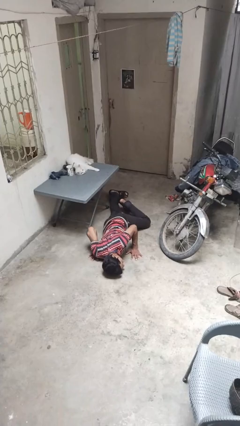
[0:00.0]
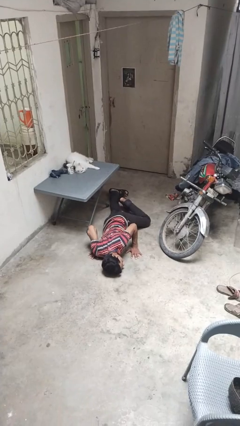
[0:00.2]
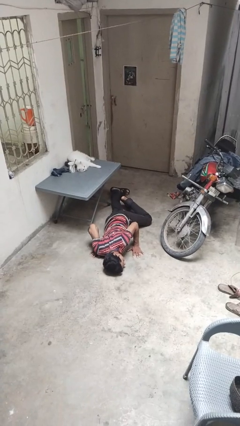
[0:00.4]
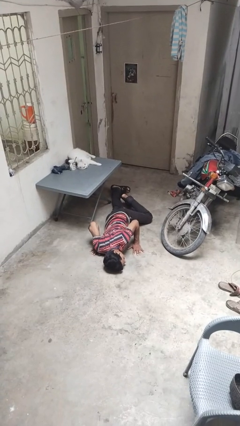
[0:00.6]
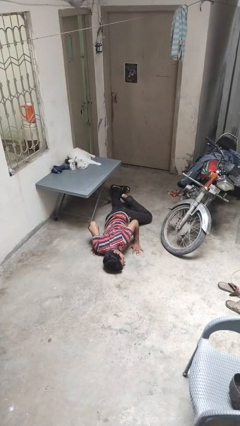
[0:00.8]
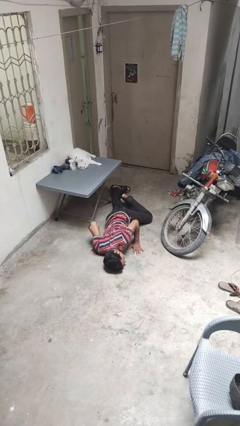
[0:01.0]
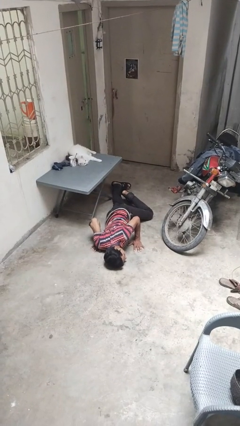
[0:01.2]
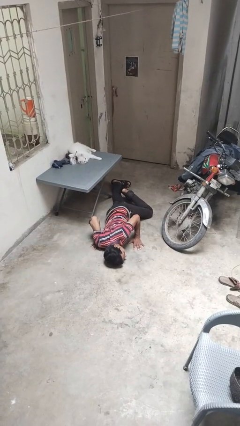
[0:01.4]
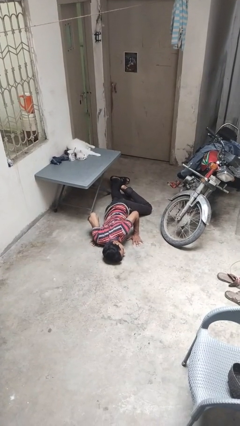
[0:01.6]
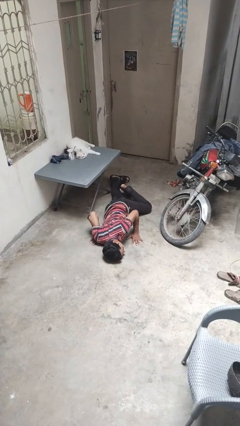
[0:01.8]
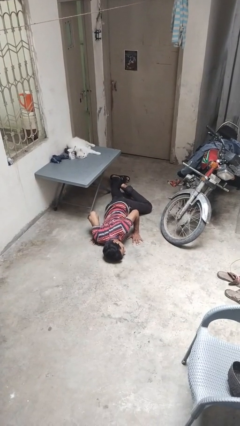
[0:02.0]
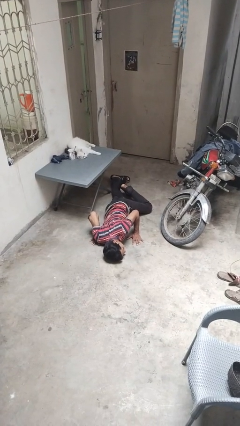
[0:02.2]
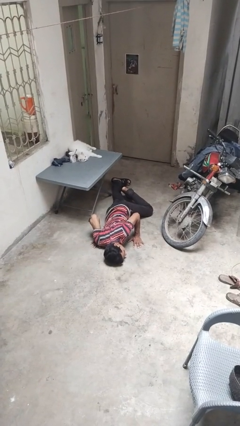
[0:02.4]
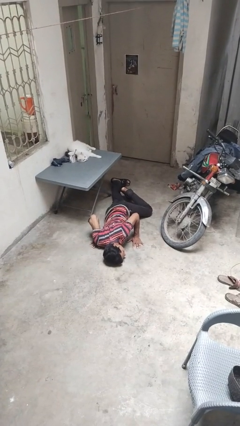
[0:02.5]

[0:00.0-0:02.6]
person lies down on floor

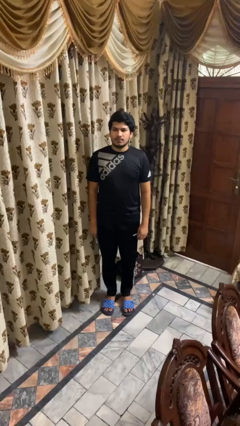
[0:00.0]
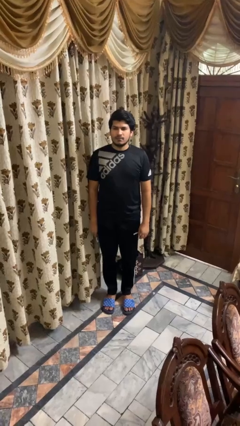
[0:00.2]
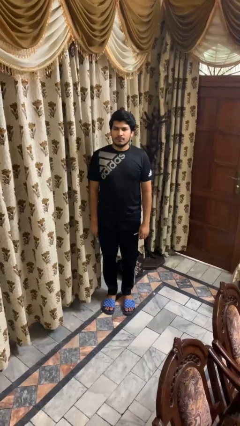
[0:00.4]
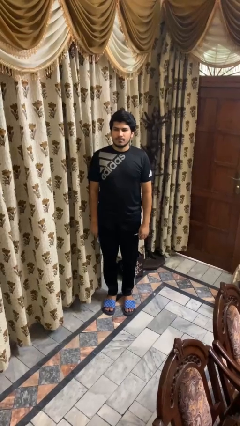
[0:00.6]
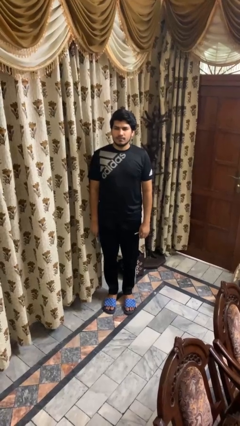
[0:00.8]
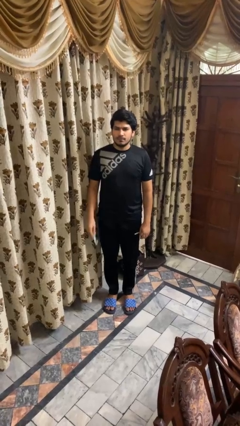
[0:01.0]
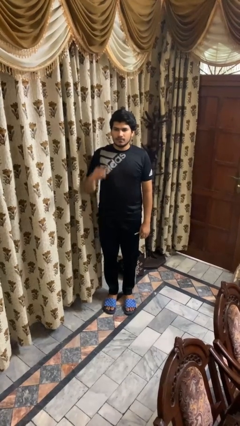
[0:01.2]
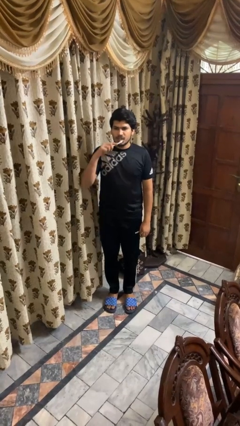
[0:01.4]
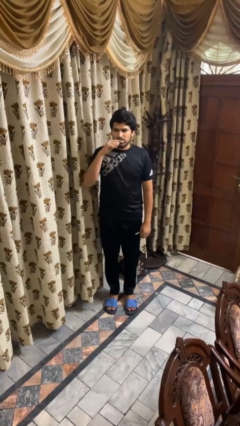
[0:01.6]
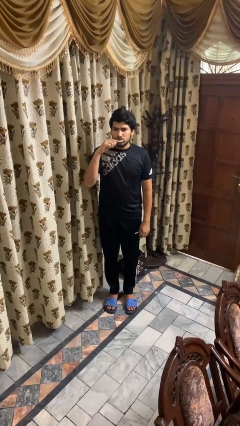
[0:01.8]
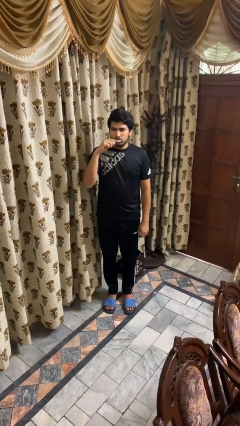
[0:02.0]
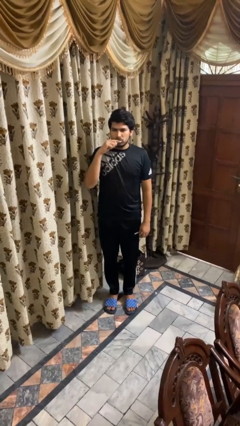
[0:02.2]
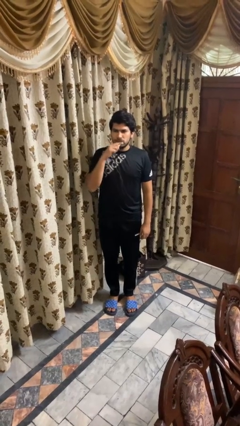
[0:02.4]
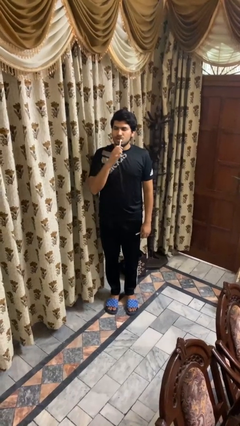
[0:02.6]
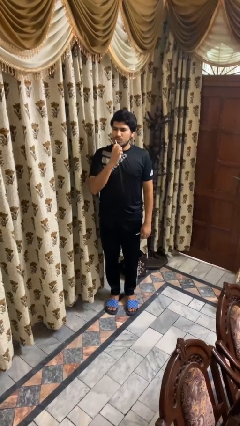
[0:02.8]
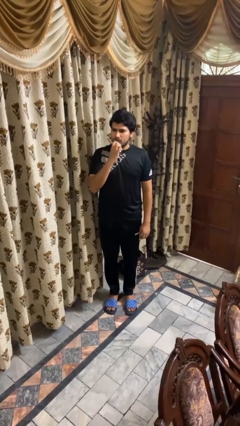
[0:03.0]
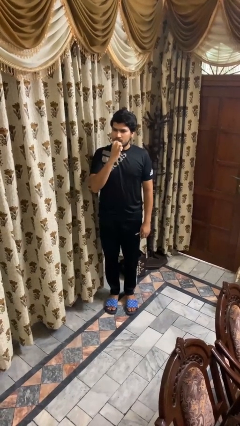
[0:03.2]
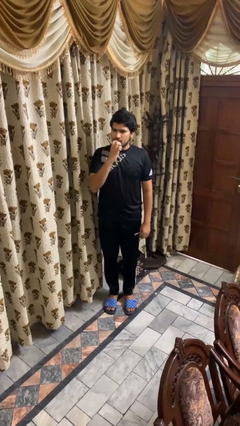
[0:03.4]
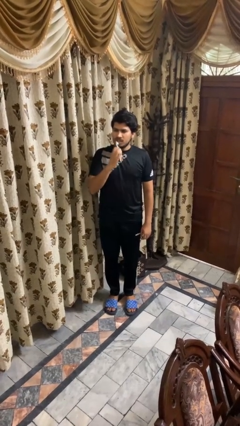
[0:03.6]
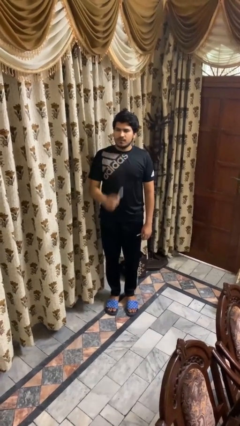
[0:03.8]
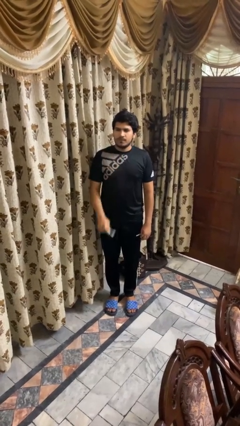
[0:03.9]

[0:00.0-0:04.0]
person brushes teeth

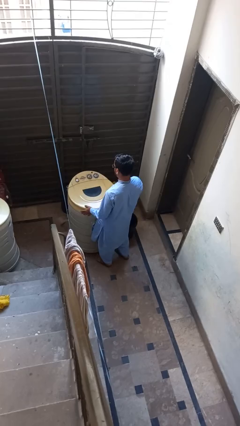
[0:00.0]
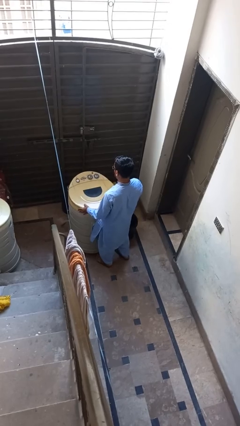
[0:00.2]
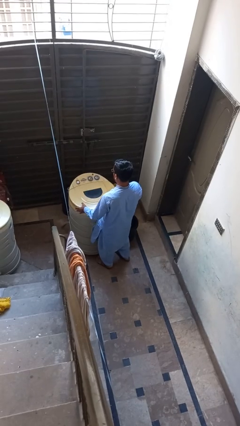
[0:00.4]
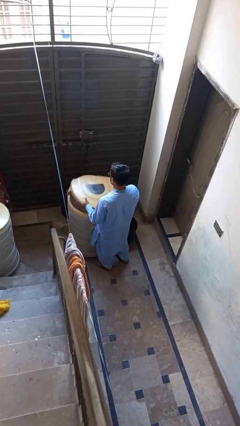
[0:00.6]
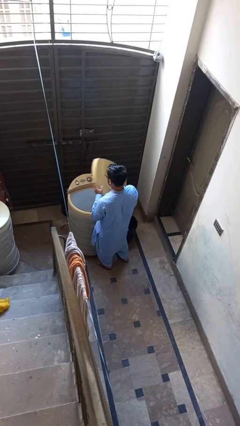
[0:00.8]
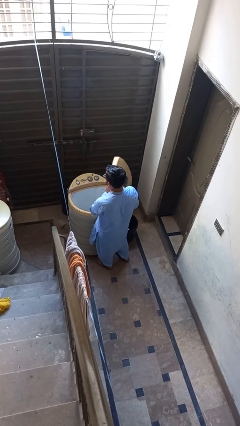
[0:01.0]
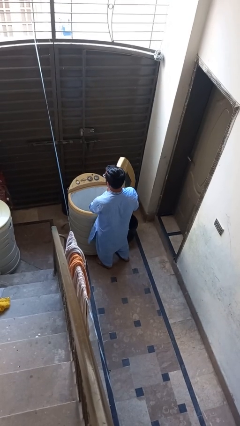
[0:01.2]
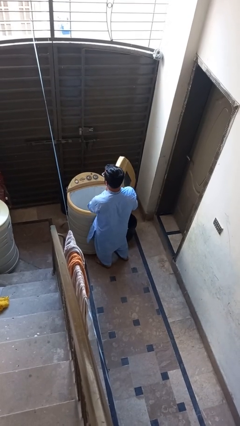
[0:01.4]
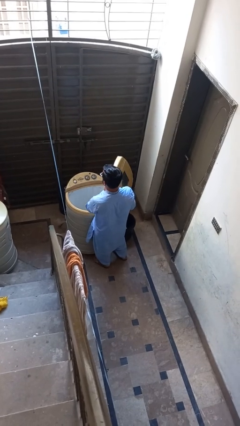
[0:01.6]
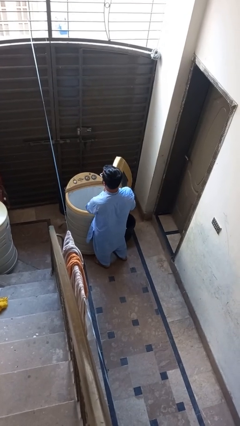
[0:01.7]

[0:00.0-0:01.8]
person opens clothes washer

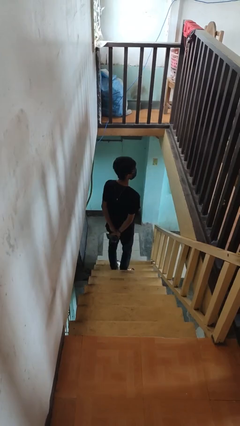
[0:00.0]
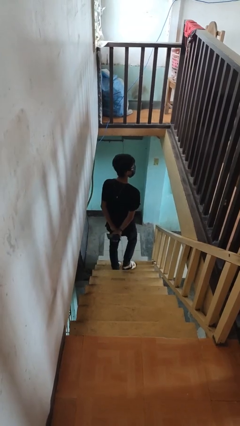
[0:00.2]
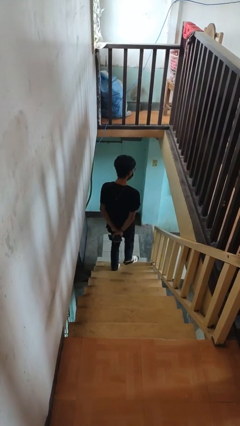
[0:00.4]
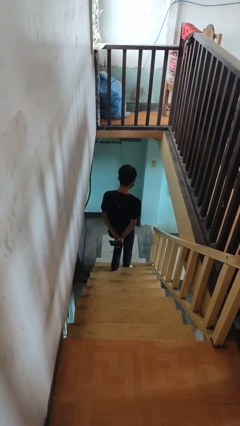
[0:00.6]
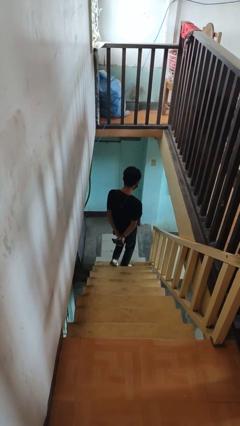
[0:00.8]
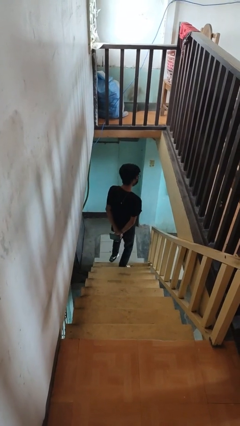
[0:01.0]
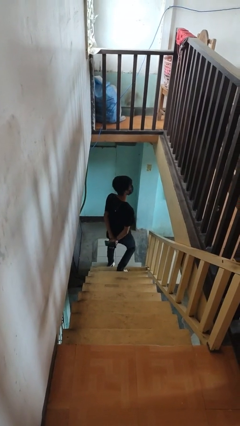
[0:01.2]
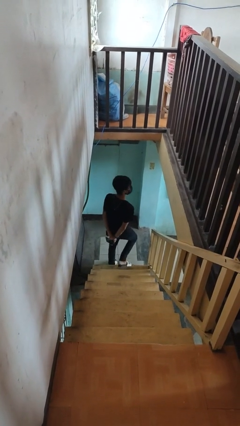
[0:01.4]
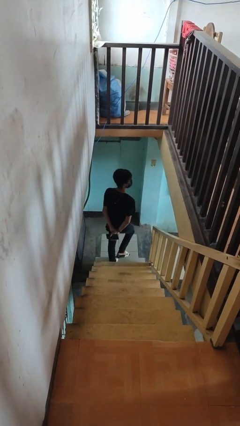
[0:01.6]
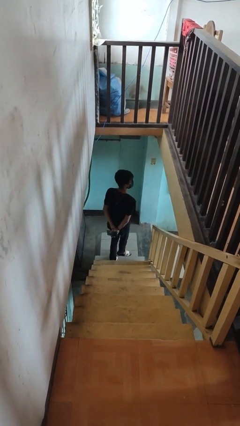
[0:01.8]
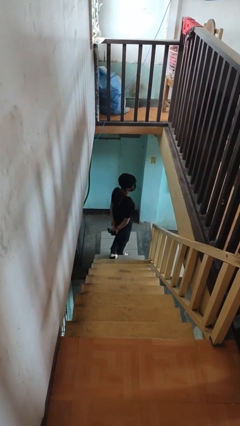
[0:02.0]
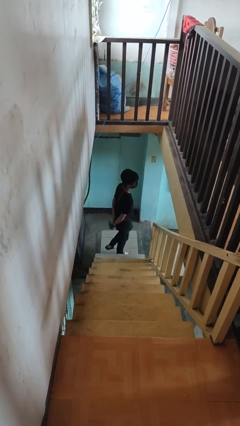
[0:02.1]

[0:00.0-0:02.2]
person climbs down ladder

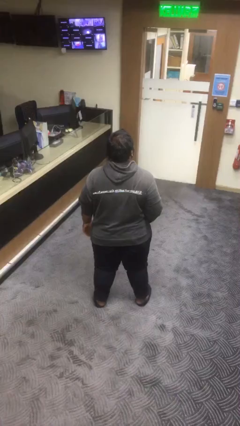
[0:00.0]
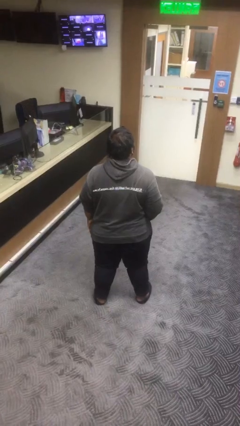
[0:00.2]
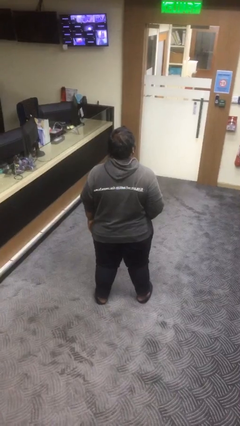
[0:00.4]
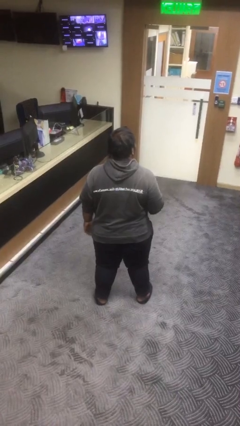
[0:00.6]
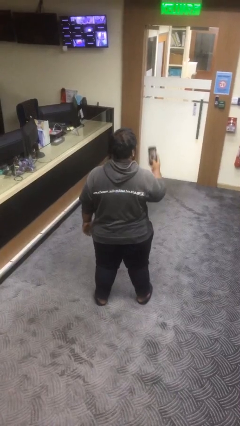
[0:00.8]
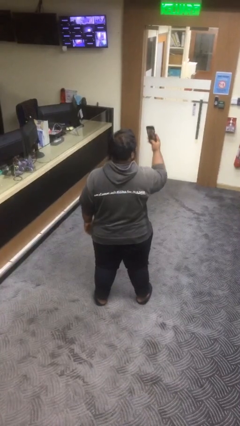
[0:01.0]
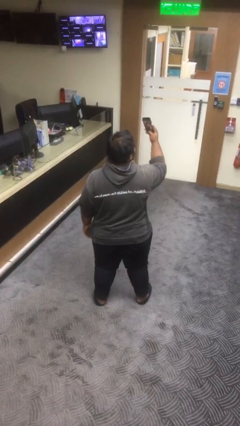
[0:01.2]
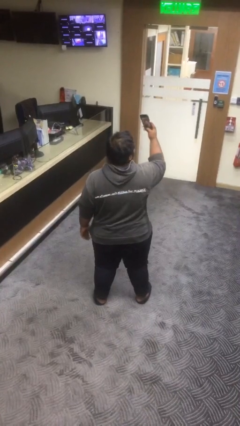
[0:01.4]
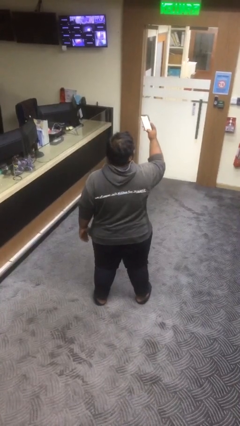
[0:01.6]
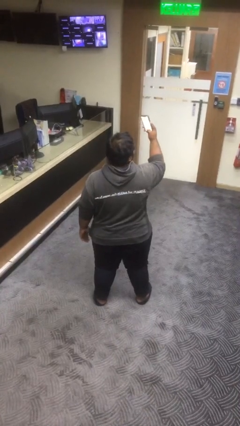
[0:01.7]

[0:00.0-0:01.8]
person takes selfie

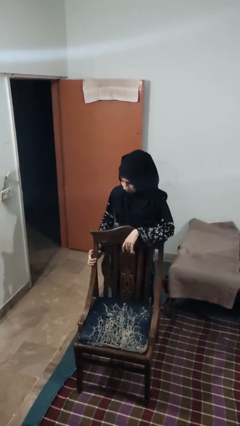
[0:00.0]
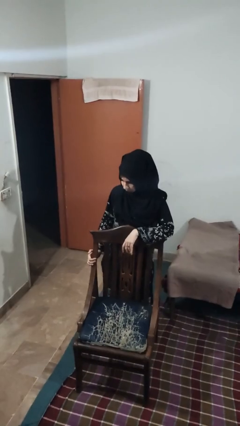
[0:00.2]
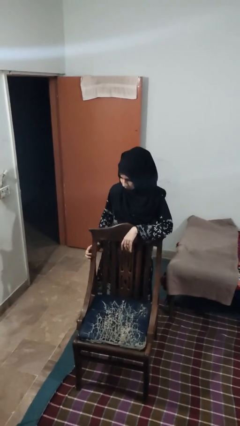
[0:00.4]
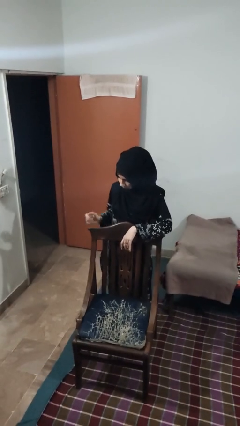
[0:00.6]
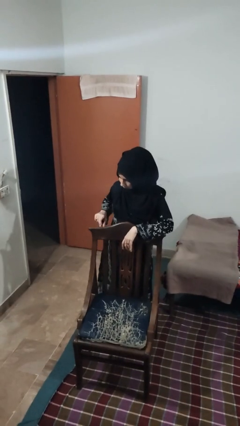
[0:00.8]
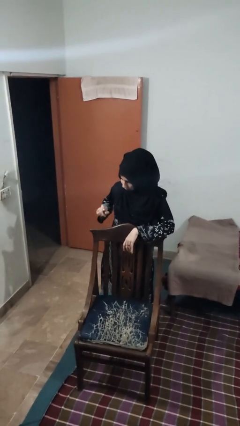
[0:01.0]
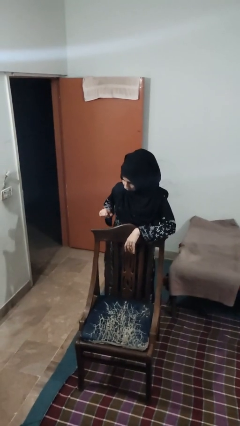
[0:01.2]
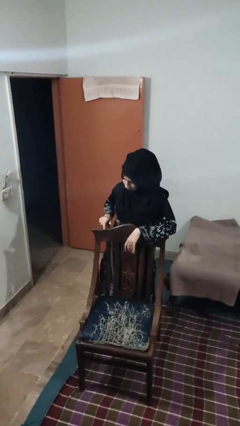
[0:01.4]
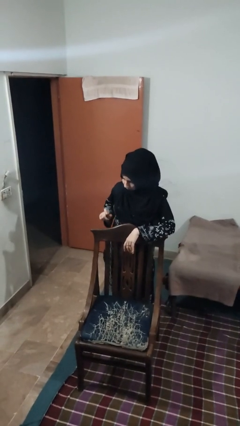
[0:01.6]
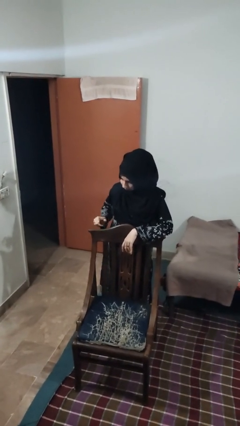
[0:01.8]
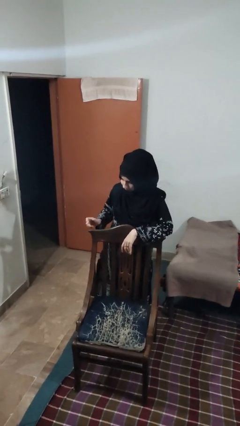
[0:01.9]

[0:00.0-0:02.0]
person taps object with finger

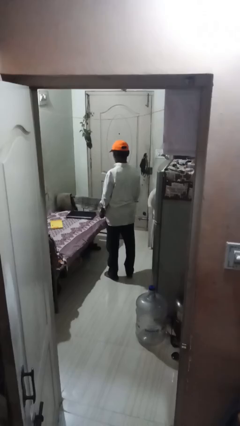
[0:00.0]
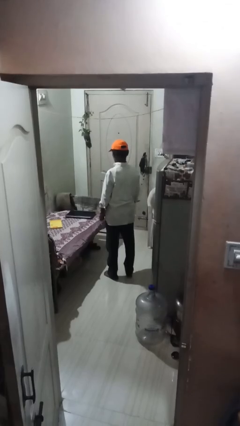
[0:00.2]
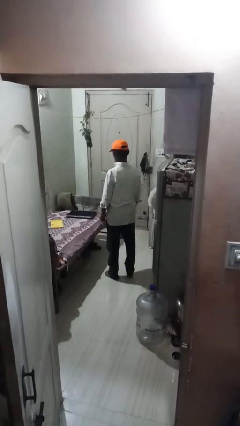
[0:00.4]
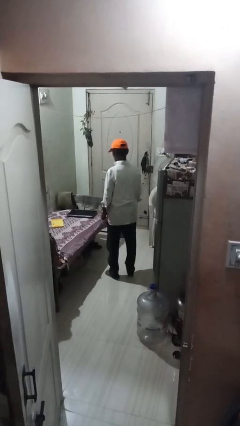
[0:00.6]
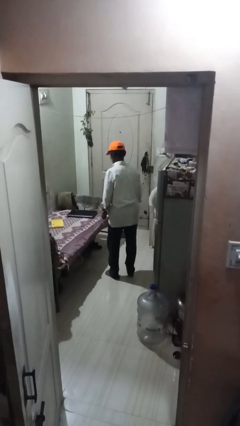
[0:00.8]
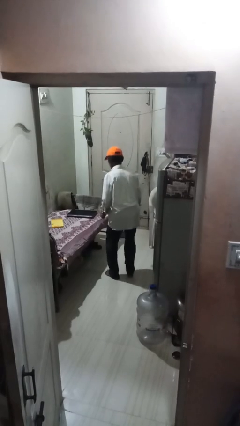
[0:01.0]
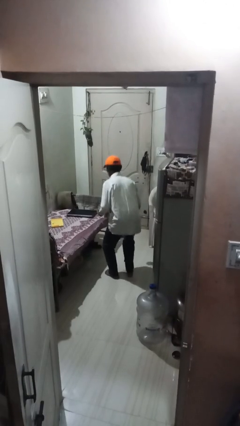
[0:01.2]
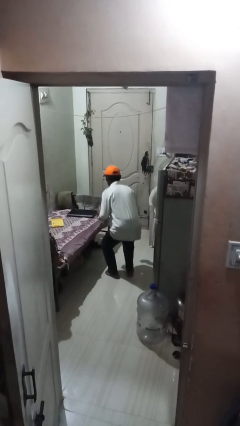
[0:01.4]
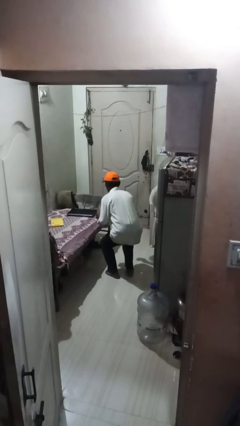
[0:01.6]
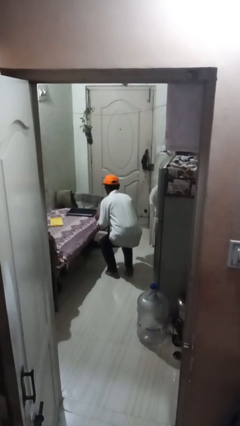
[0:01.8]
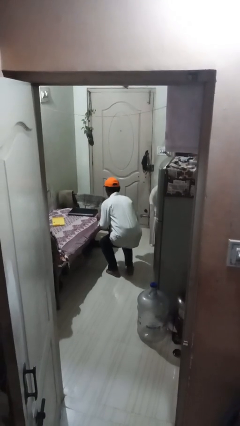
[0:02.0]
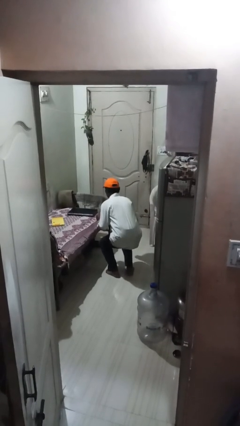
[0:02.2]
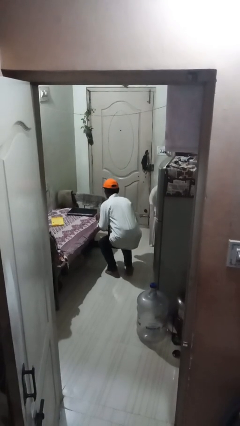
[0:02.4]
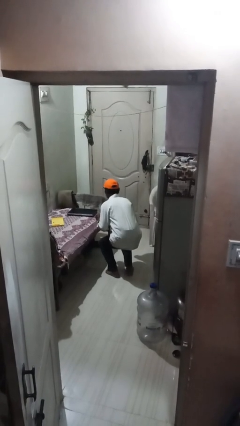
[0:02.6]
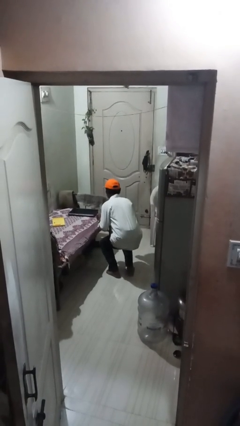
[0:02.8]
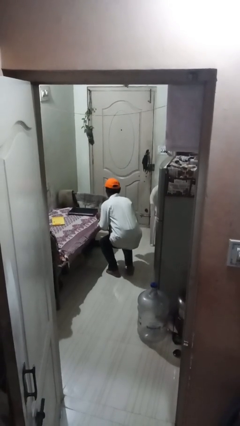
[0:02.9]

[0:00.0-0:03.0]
person squats
